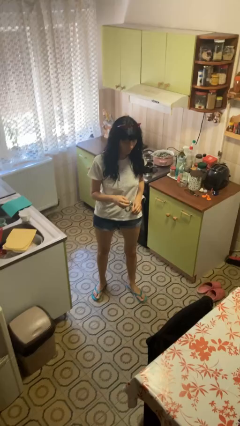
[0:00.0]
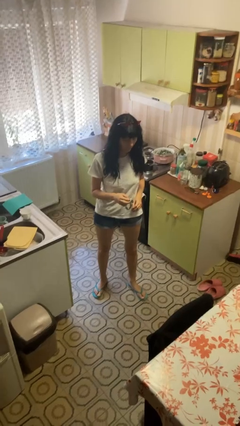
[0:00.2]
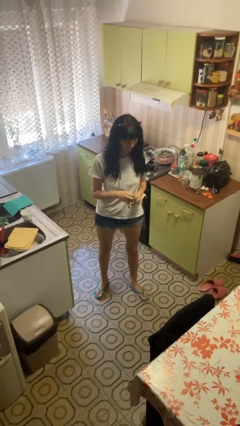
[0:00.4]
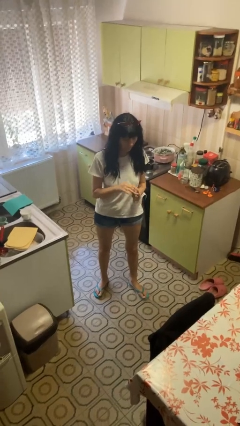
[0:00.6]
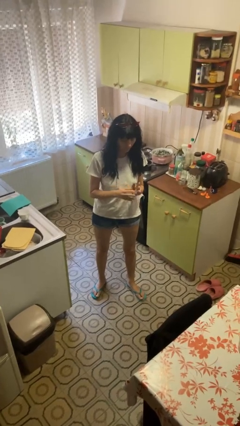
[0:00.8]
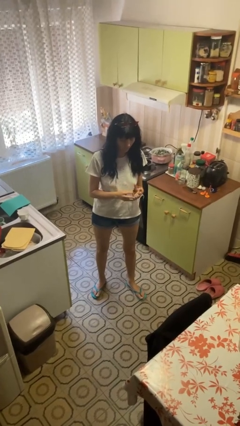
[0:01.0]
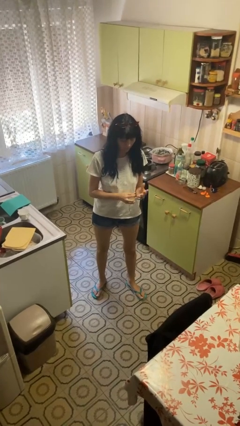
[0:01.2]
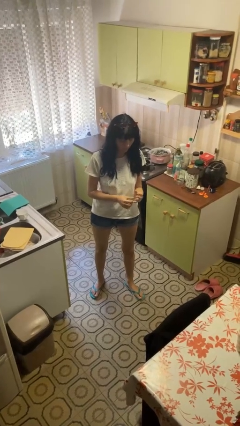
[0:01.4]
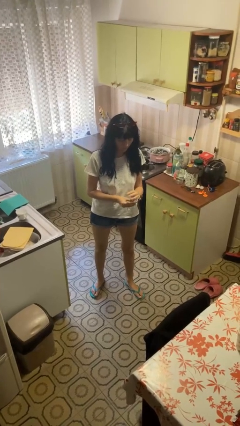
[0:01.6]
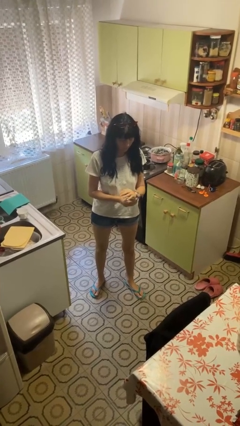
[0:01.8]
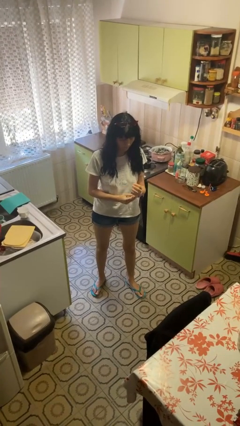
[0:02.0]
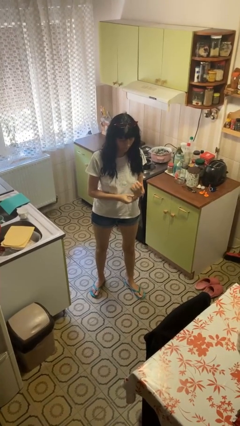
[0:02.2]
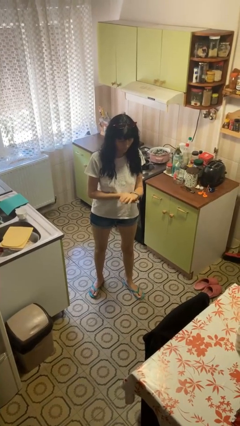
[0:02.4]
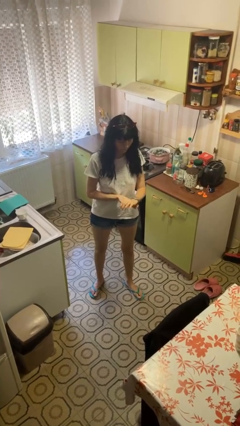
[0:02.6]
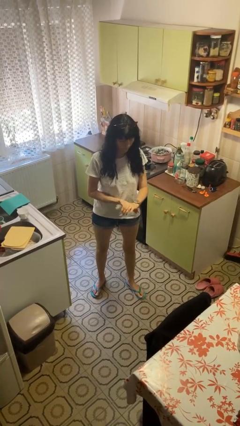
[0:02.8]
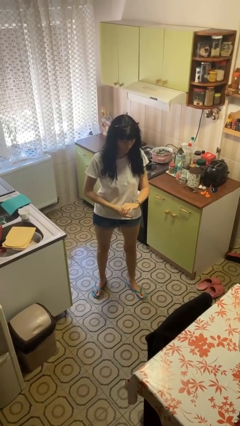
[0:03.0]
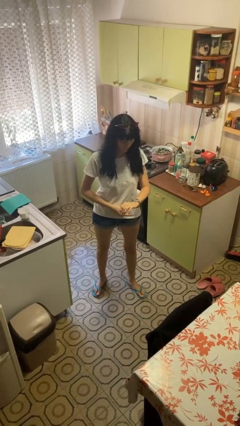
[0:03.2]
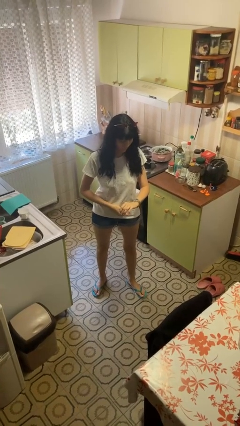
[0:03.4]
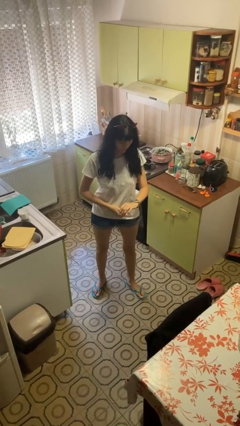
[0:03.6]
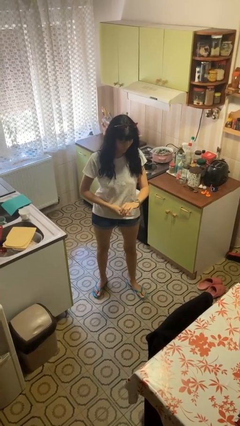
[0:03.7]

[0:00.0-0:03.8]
person puts on wristwatch

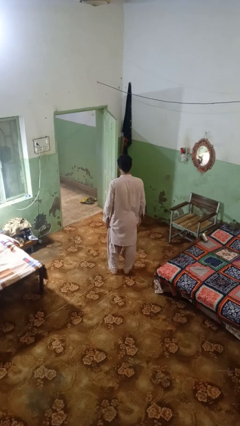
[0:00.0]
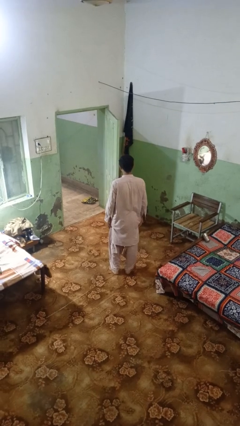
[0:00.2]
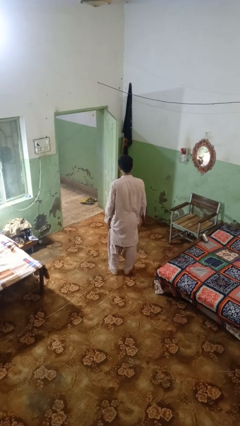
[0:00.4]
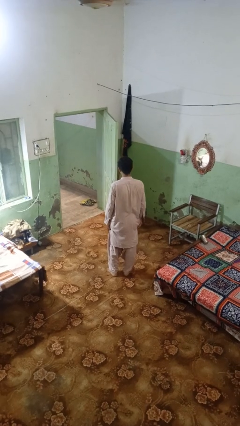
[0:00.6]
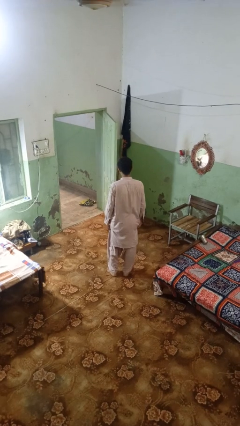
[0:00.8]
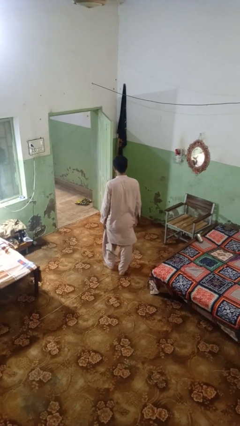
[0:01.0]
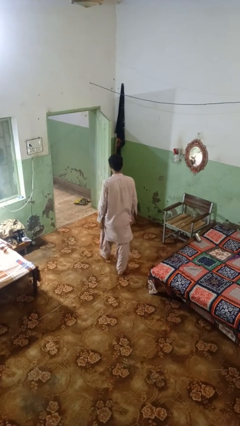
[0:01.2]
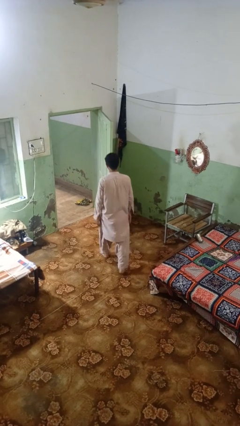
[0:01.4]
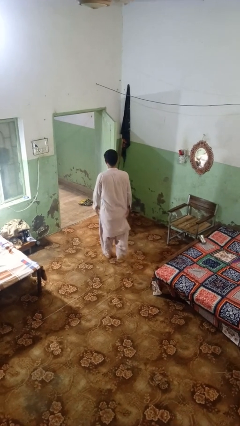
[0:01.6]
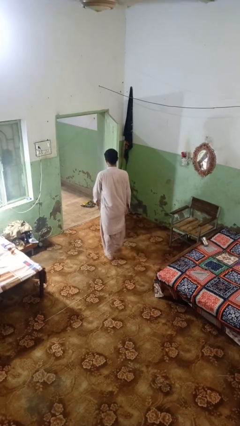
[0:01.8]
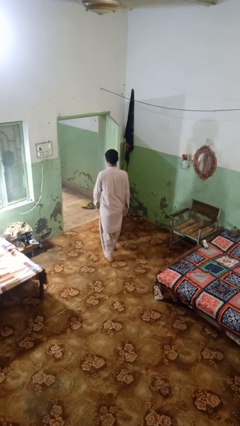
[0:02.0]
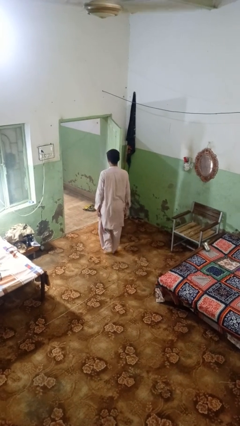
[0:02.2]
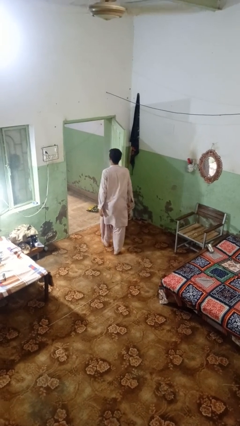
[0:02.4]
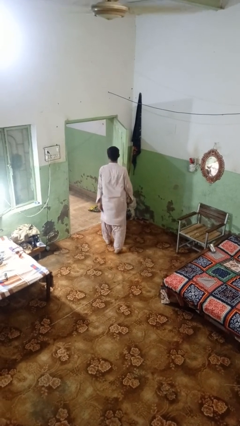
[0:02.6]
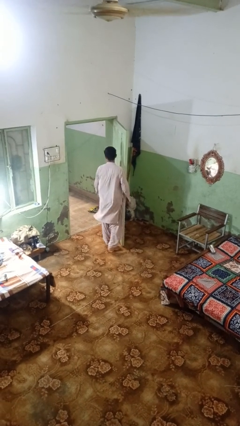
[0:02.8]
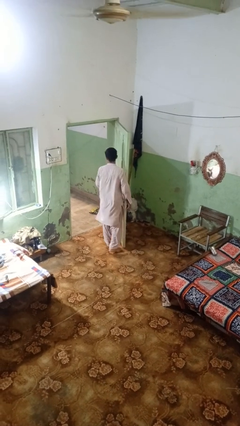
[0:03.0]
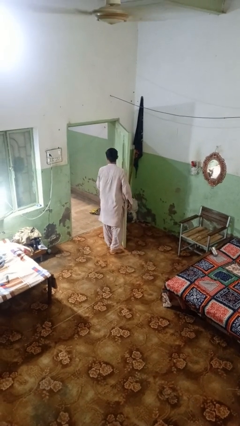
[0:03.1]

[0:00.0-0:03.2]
person bumps into wall

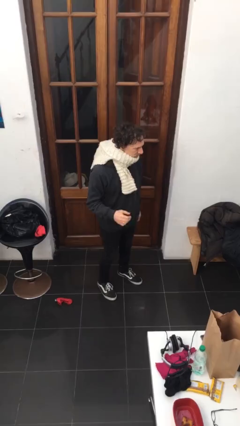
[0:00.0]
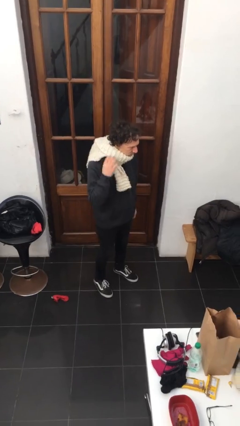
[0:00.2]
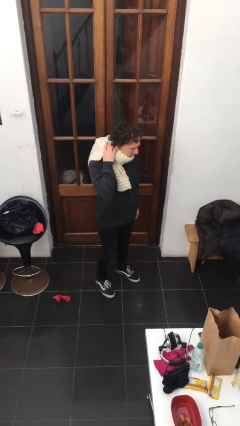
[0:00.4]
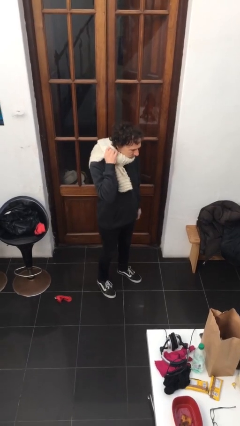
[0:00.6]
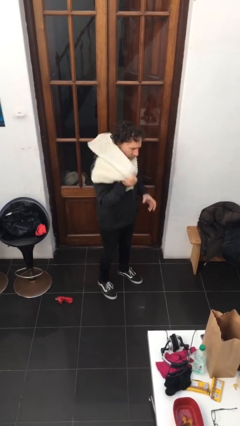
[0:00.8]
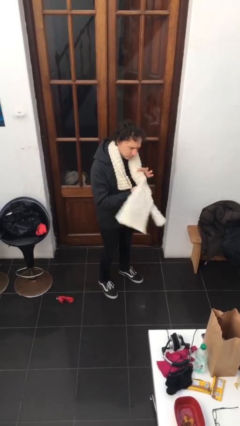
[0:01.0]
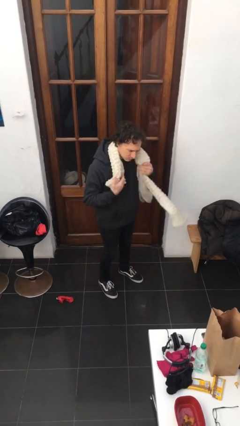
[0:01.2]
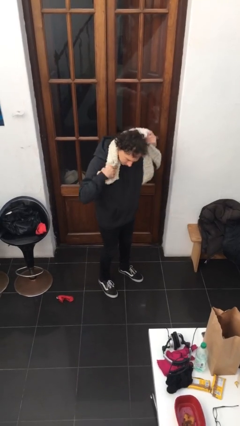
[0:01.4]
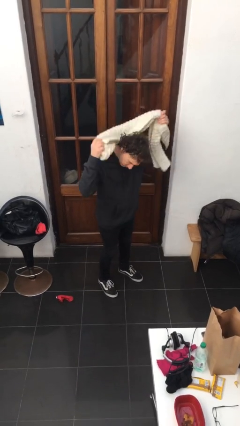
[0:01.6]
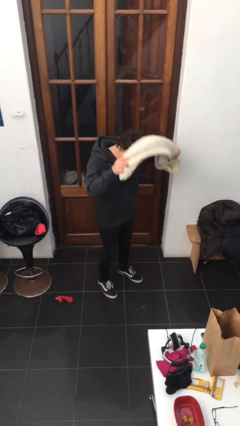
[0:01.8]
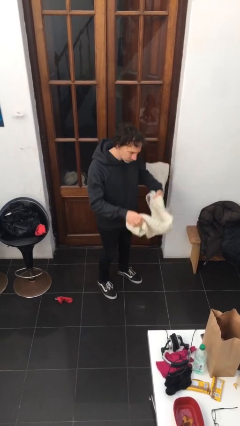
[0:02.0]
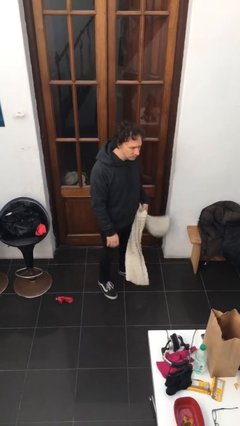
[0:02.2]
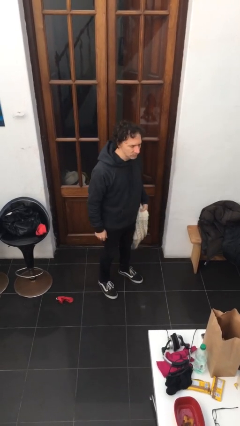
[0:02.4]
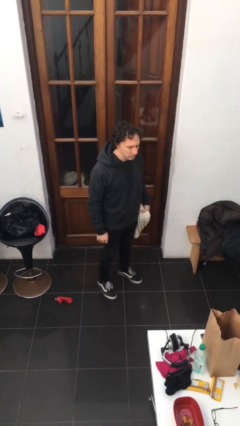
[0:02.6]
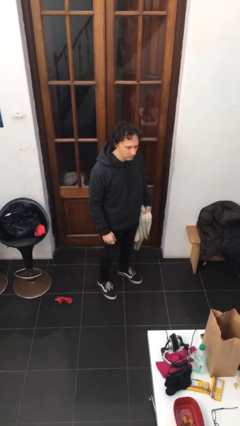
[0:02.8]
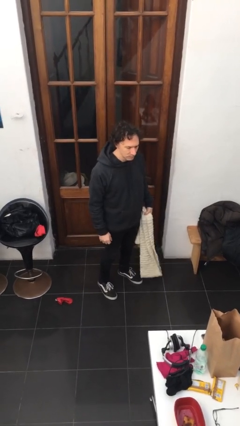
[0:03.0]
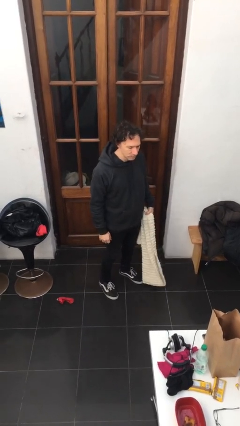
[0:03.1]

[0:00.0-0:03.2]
person takes off scarf

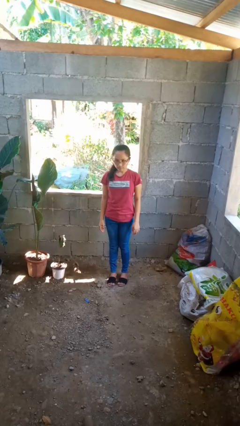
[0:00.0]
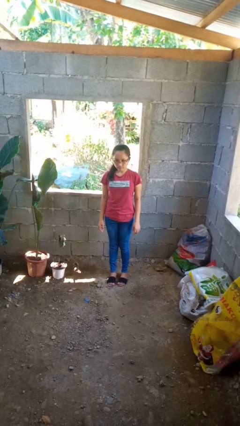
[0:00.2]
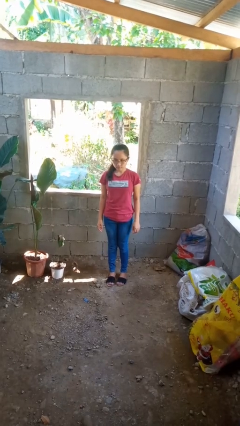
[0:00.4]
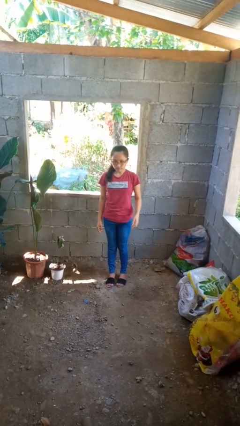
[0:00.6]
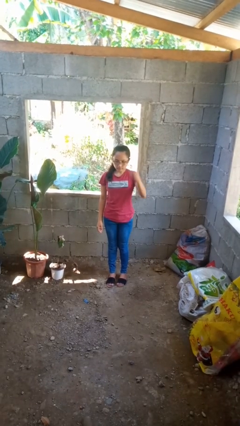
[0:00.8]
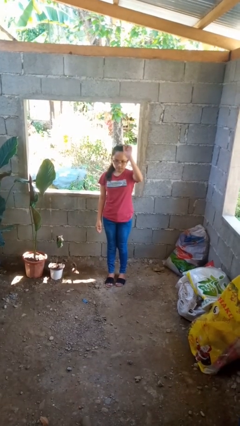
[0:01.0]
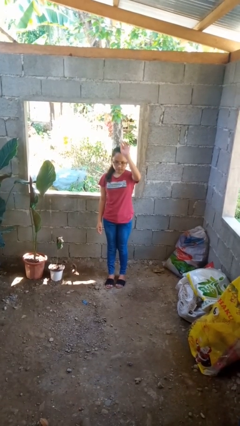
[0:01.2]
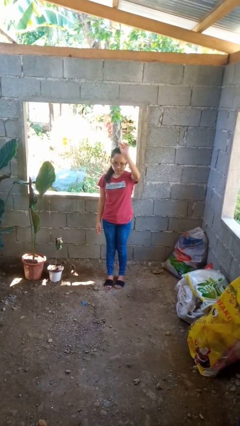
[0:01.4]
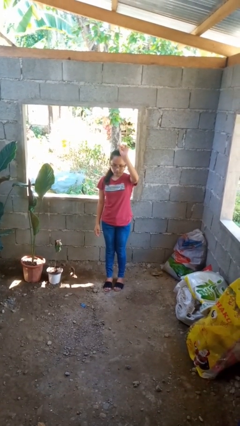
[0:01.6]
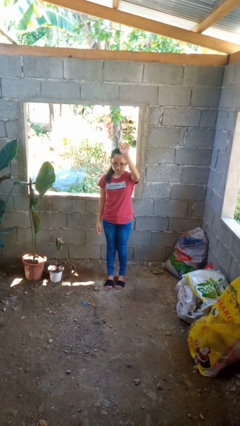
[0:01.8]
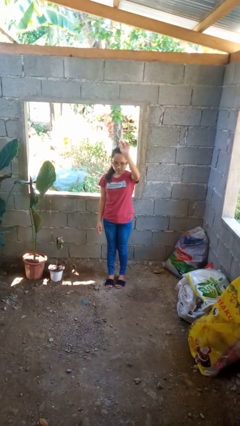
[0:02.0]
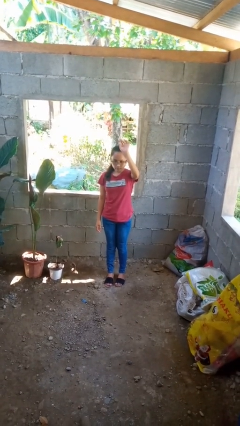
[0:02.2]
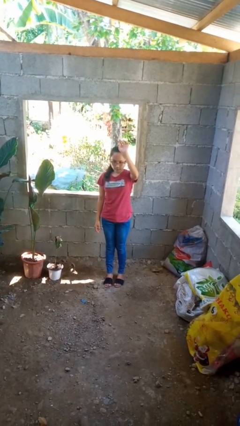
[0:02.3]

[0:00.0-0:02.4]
person gestures raise hand

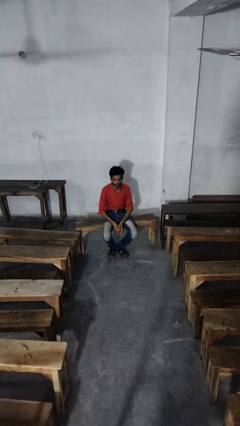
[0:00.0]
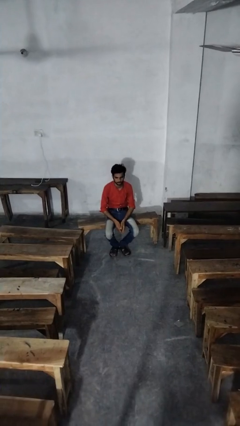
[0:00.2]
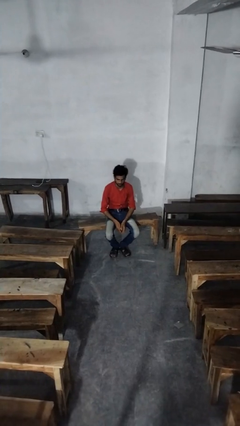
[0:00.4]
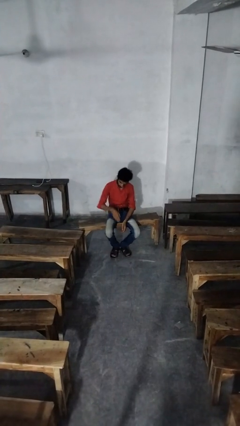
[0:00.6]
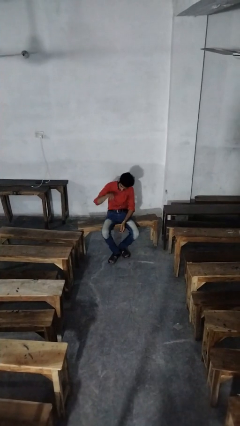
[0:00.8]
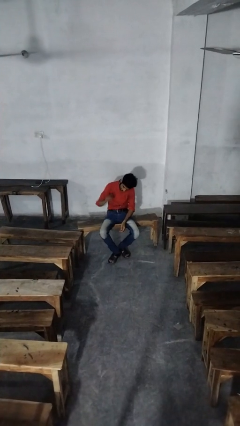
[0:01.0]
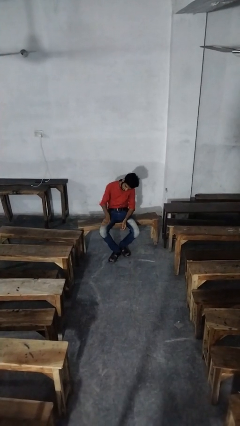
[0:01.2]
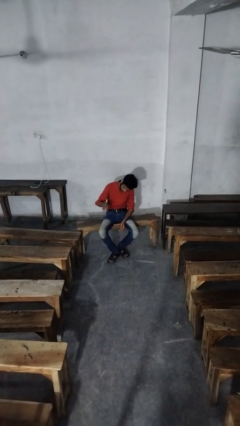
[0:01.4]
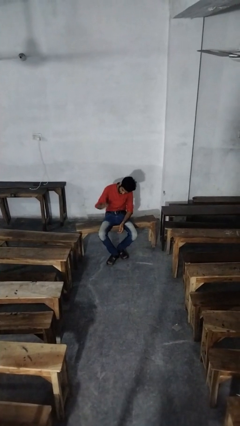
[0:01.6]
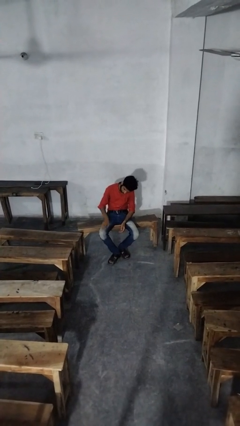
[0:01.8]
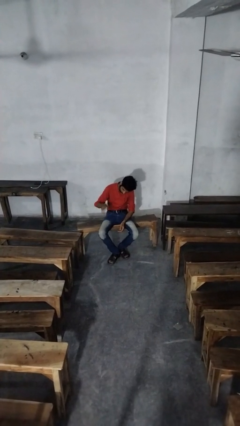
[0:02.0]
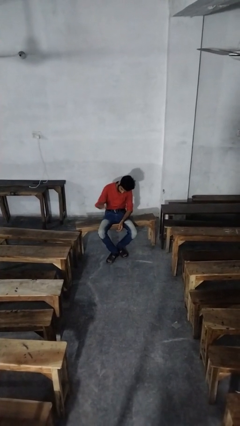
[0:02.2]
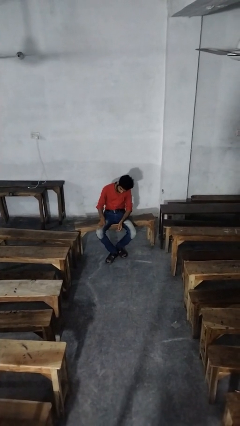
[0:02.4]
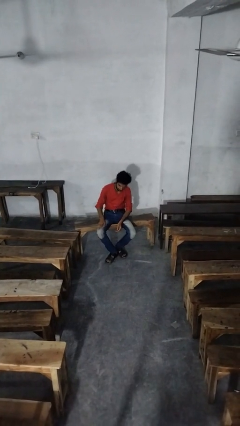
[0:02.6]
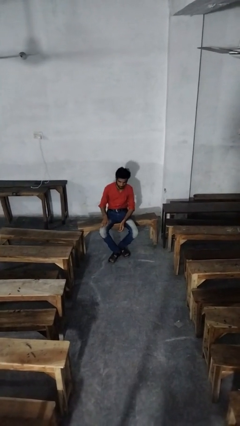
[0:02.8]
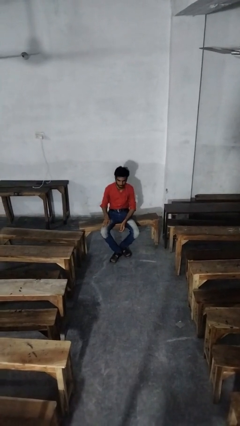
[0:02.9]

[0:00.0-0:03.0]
person slaps hands on thighs

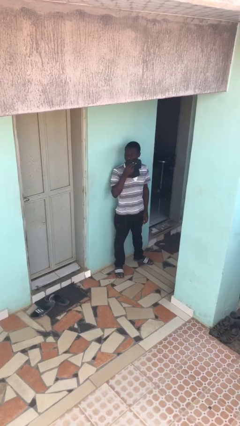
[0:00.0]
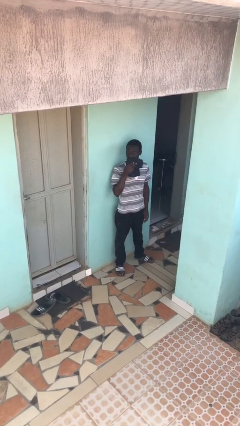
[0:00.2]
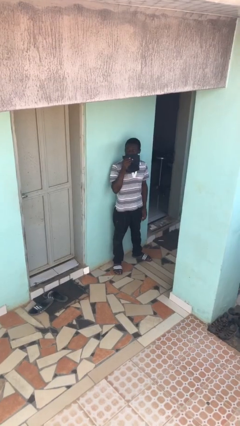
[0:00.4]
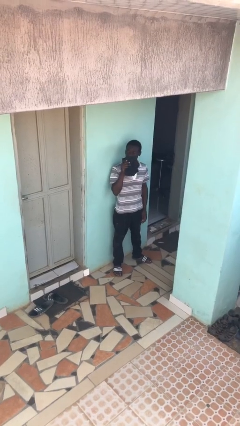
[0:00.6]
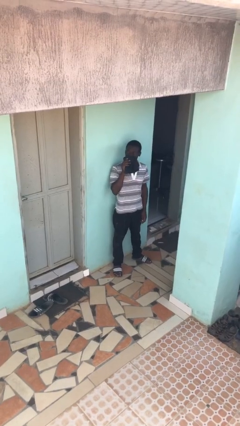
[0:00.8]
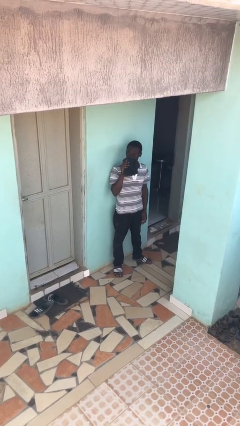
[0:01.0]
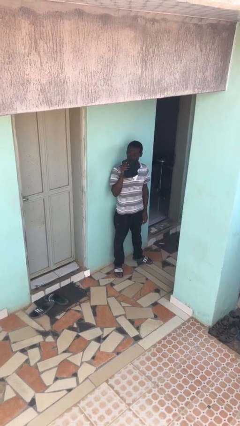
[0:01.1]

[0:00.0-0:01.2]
person wipes mouth with napkin

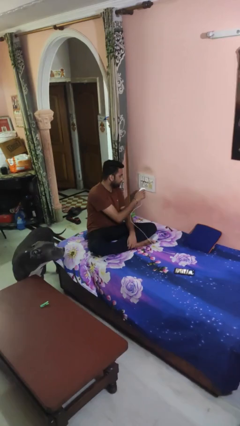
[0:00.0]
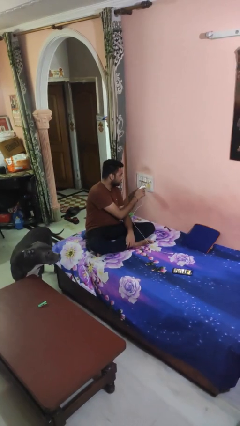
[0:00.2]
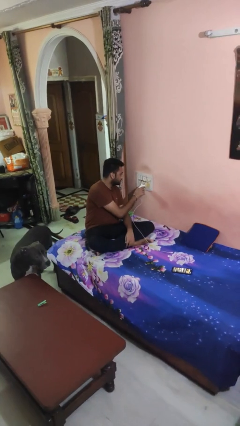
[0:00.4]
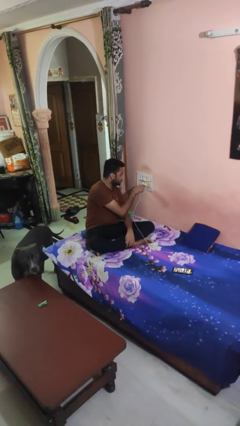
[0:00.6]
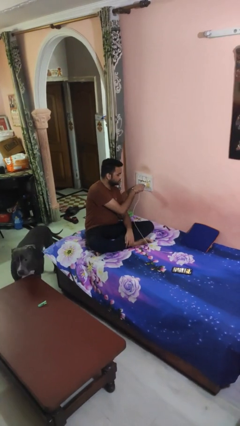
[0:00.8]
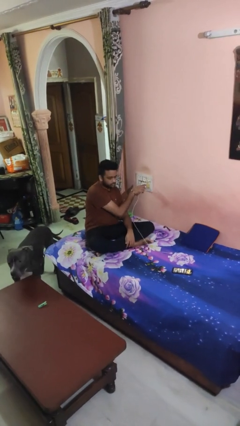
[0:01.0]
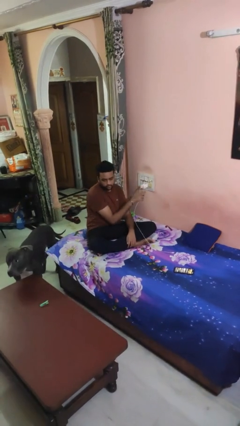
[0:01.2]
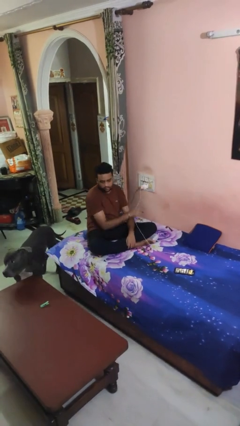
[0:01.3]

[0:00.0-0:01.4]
person plugs into electrical socket
